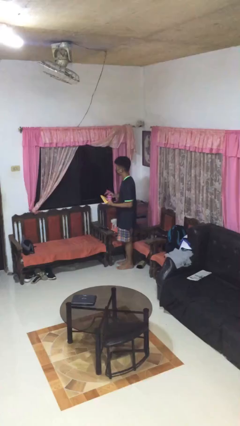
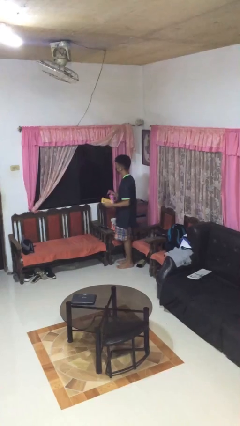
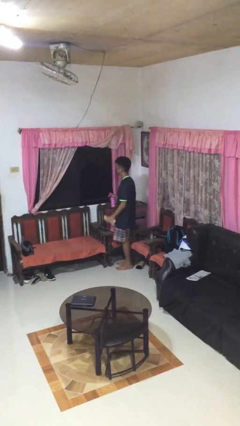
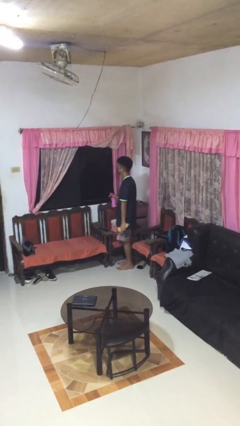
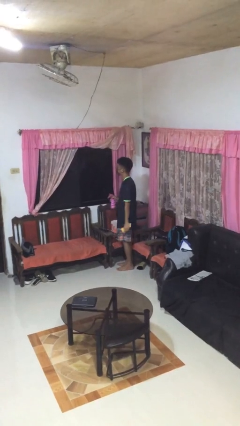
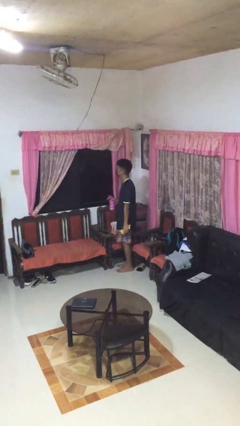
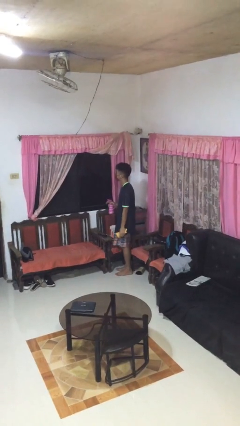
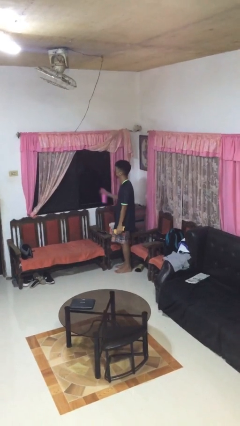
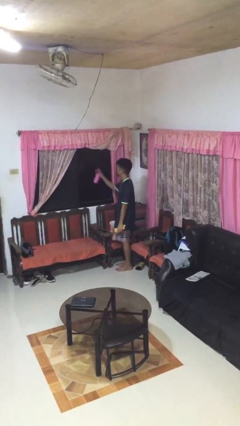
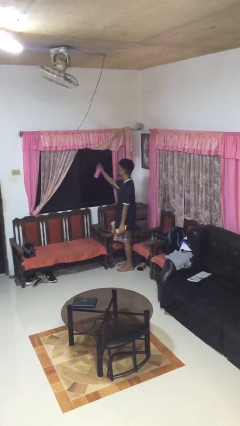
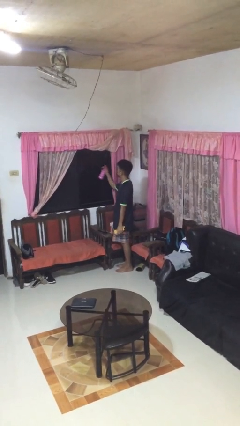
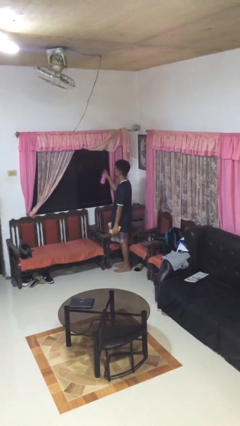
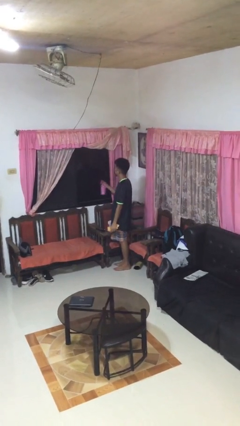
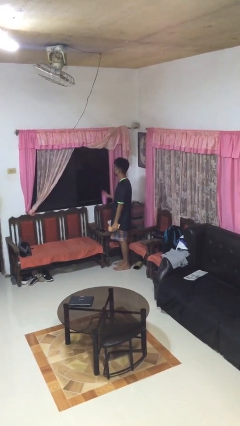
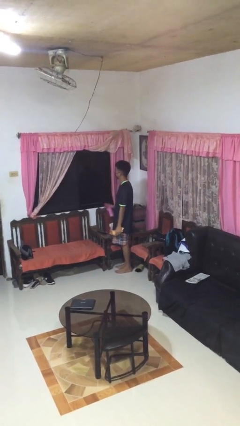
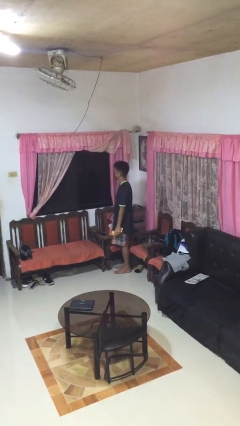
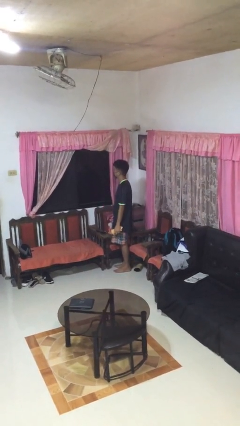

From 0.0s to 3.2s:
person sprays from bottle

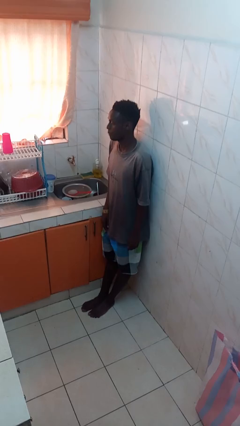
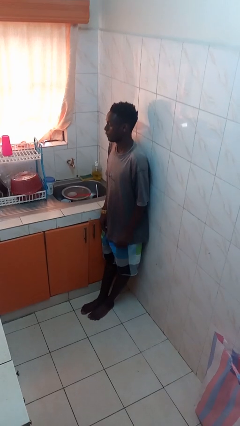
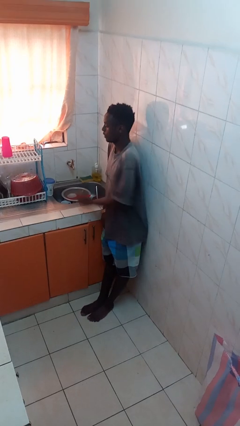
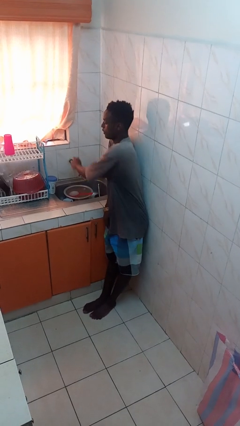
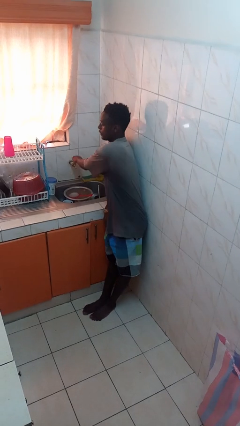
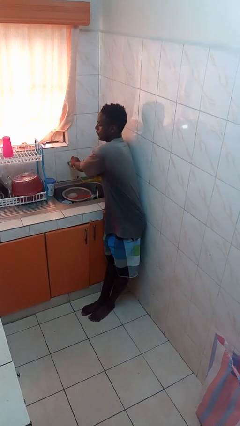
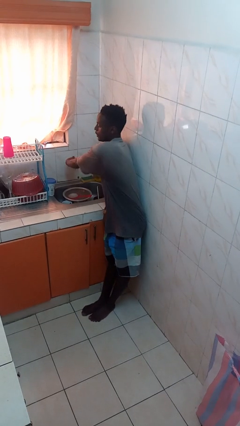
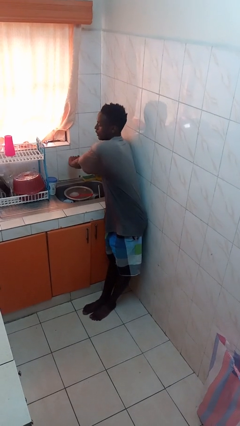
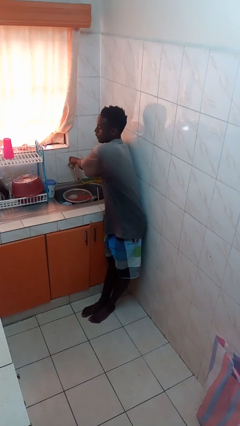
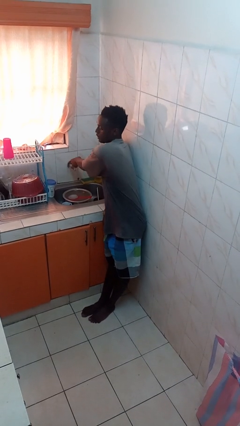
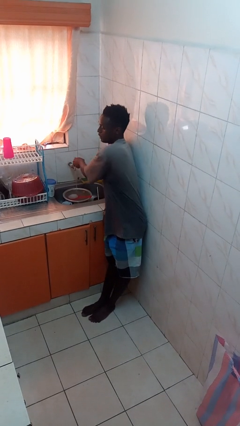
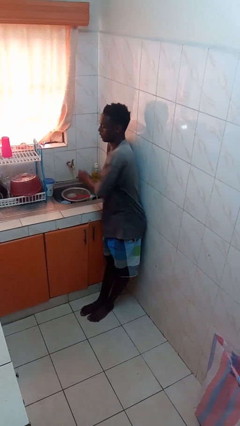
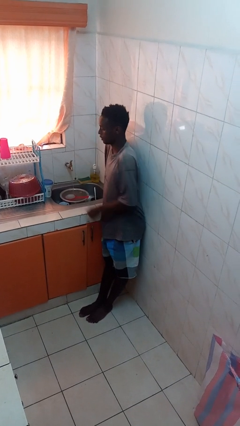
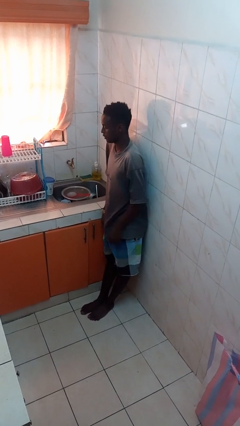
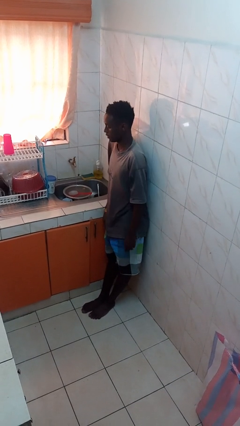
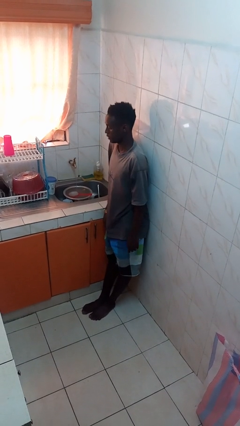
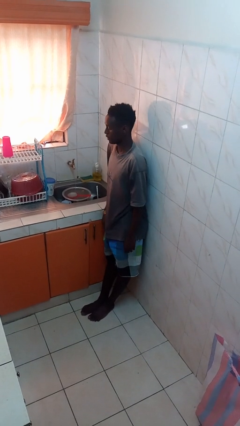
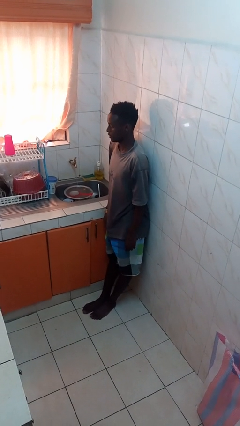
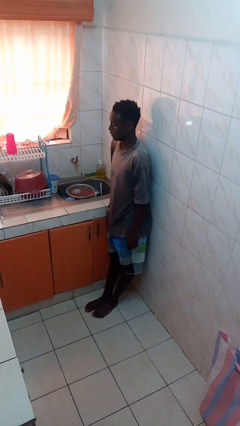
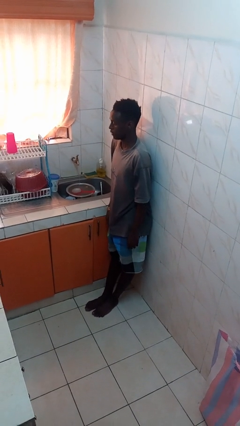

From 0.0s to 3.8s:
person turns on faucet

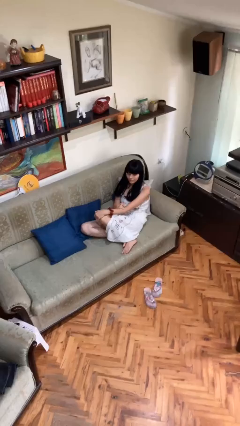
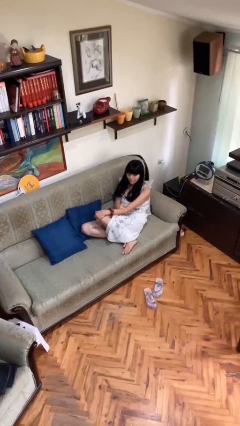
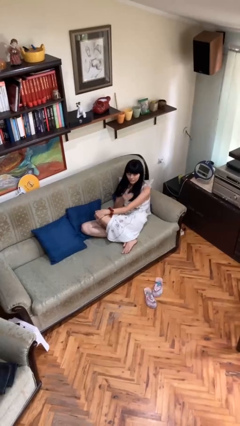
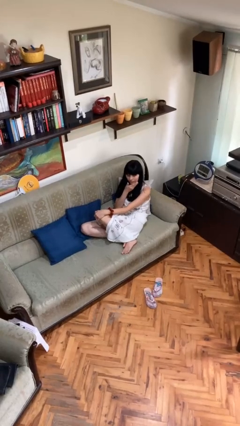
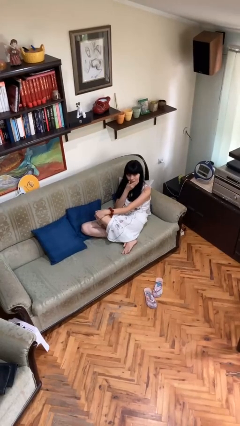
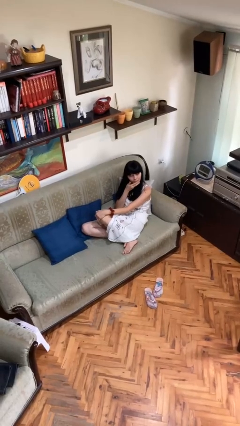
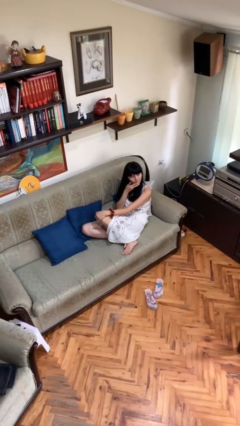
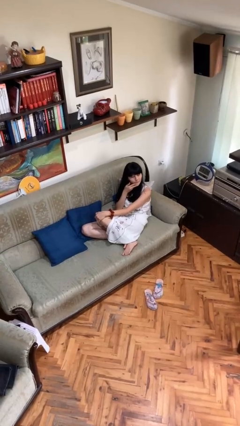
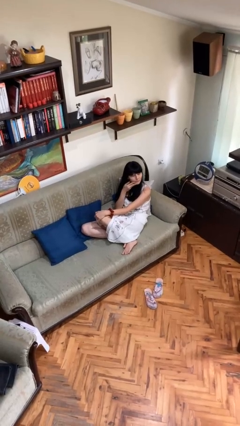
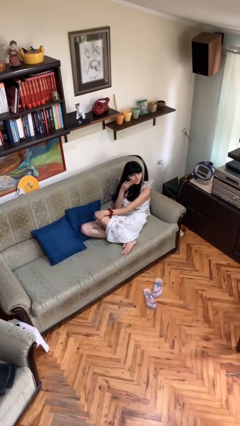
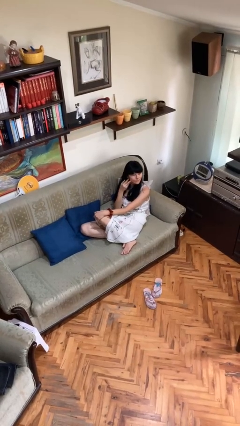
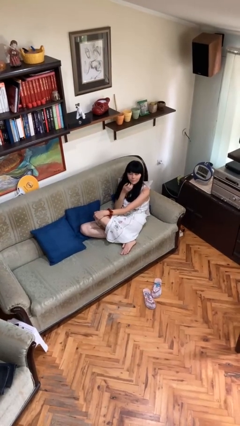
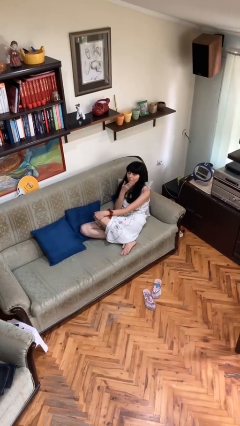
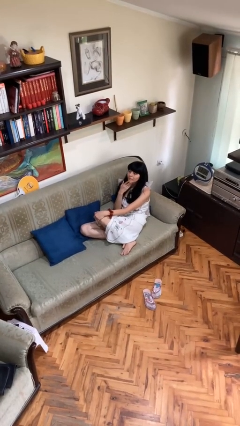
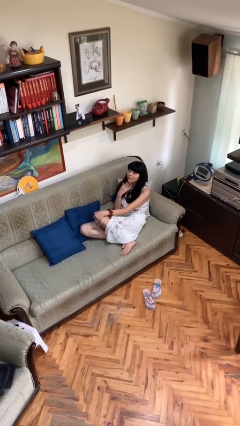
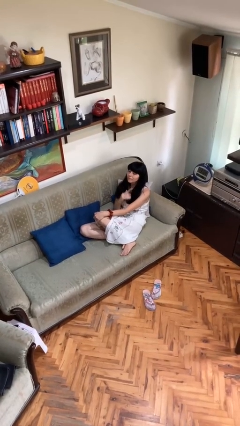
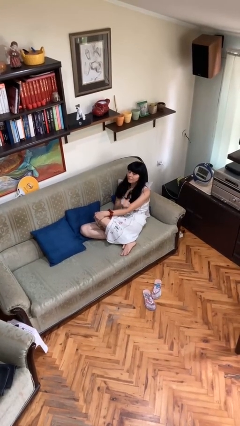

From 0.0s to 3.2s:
person strokes chin

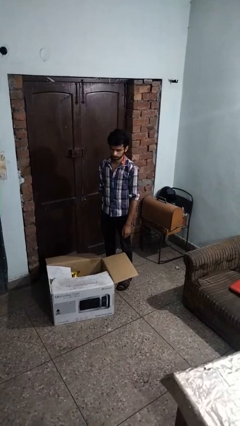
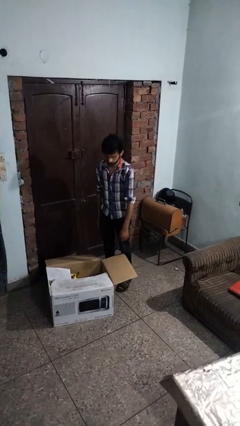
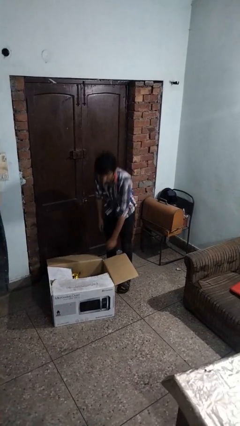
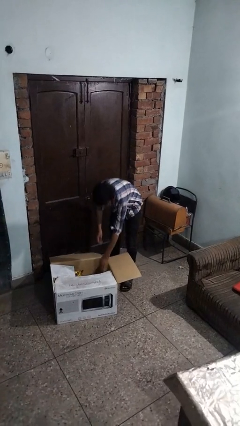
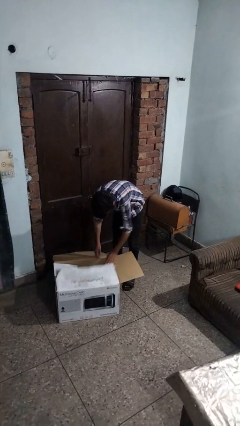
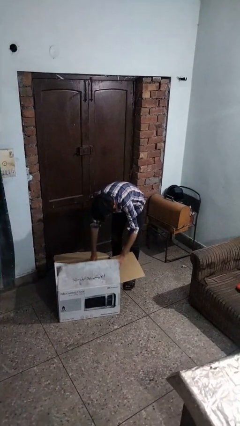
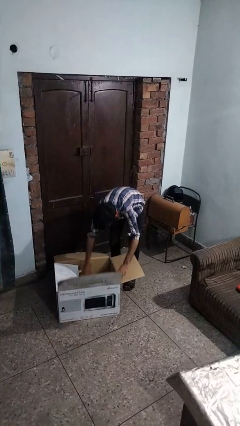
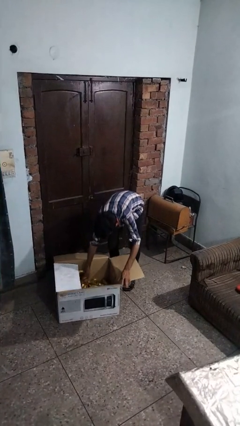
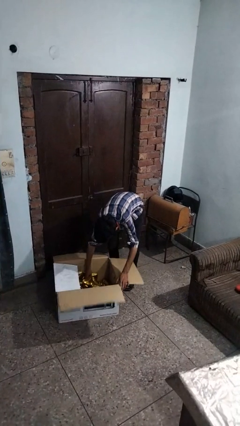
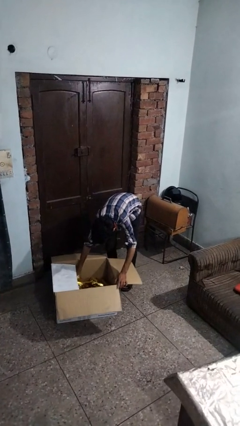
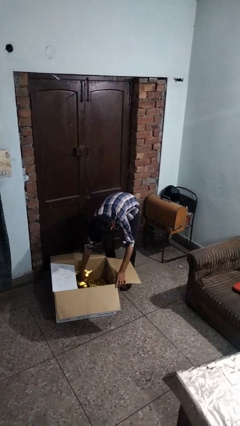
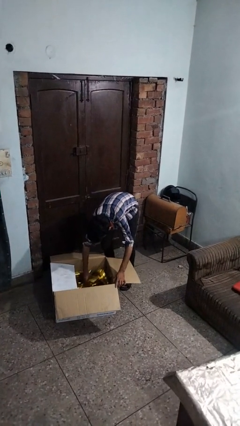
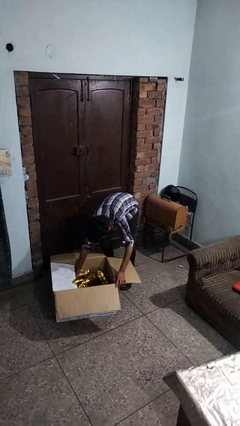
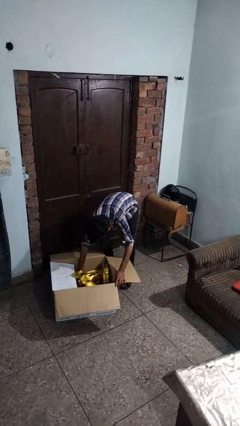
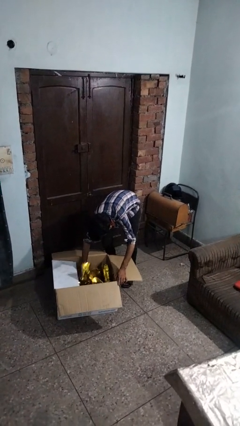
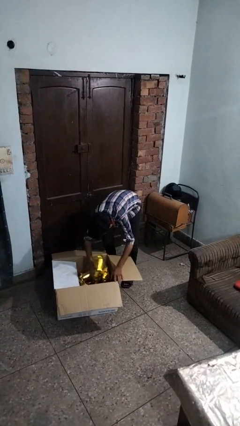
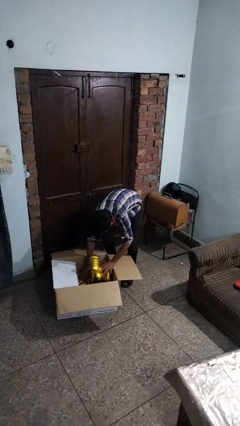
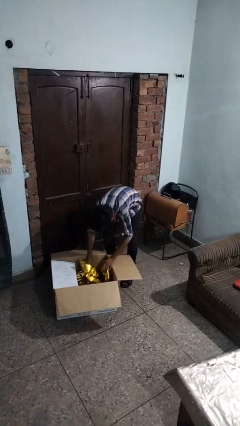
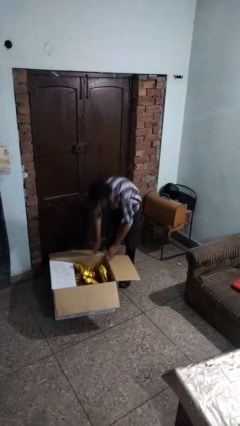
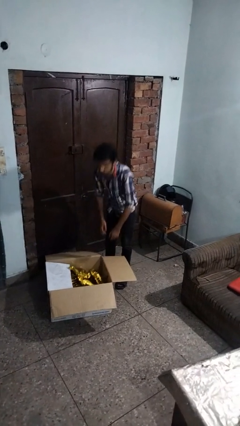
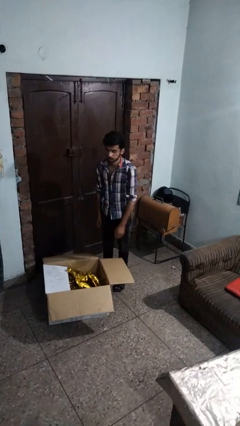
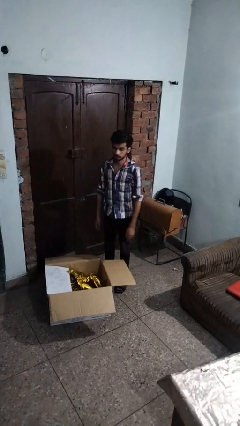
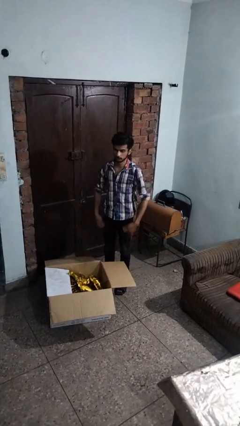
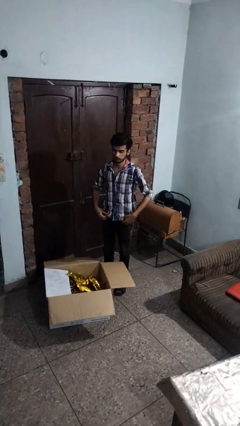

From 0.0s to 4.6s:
person searches in box

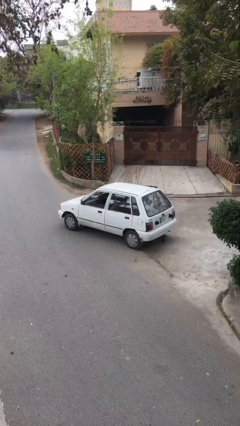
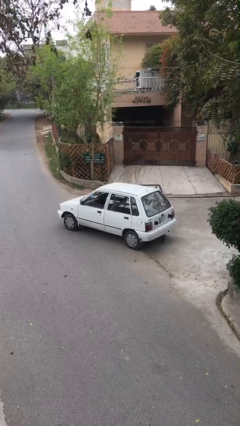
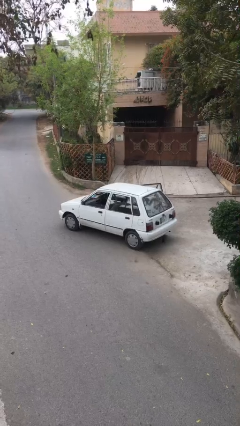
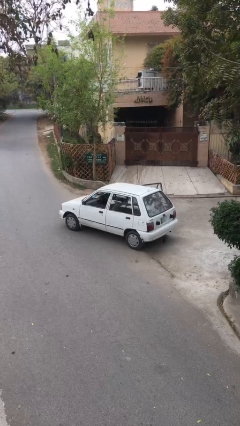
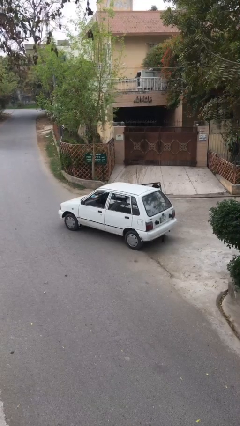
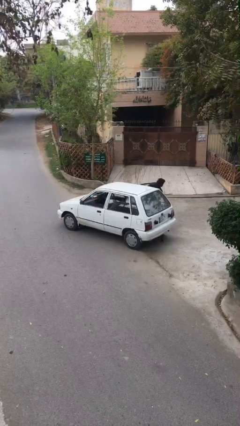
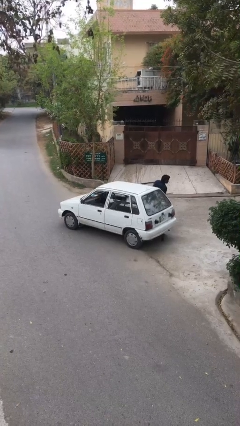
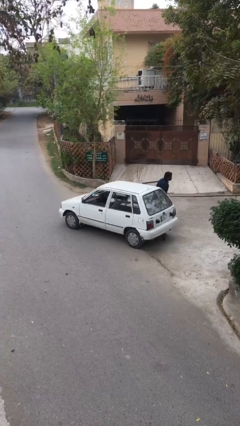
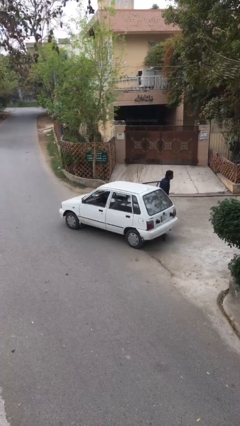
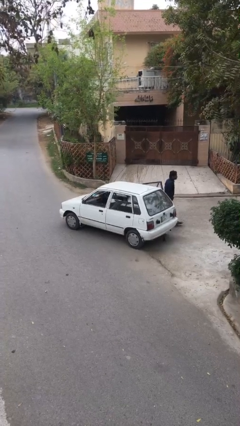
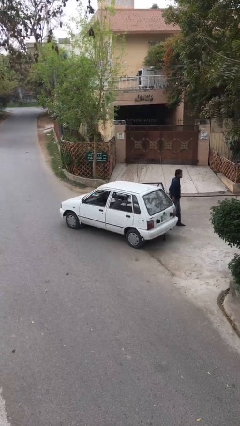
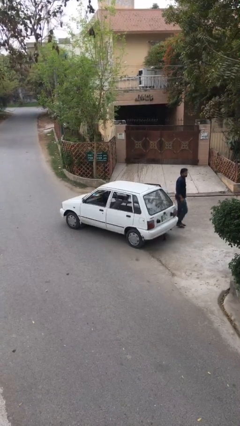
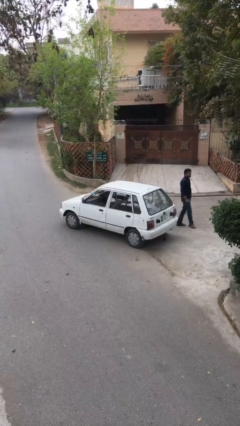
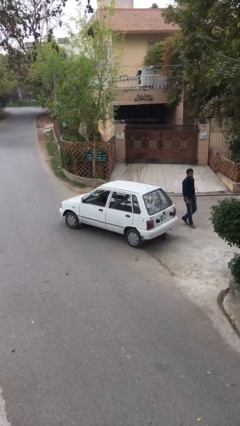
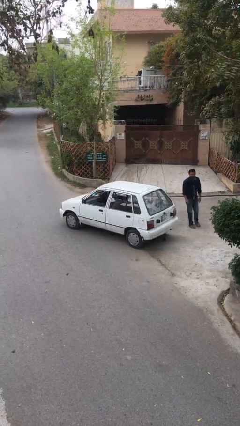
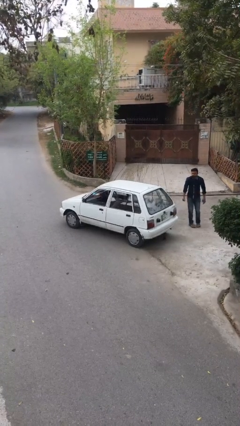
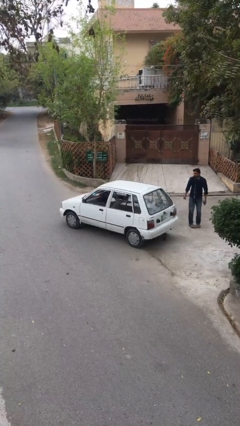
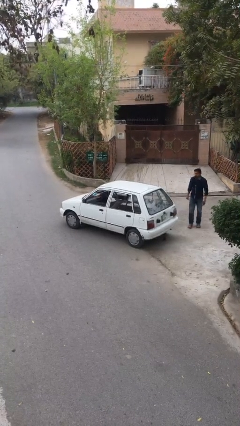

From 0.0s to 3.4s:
car drops off person
